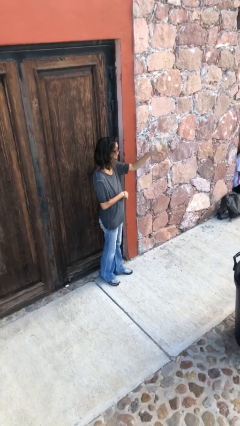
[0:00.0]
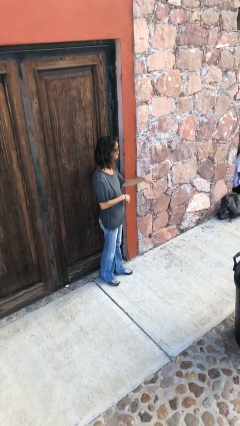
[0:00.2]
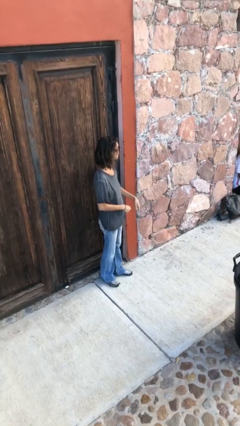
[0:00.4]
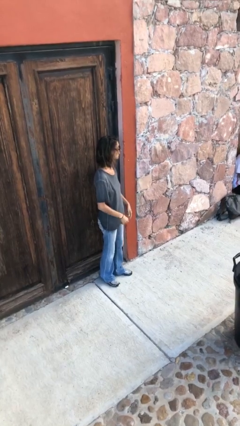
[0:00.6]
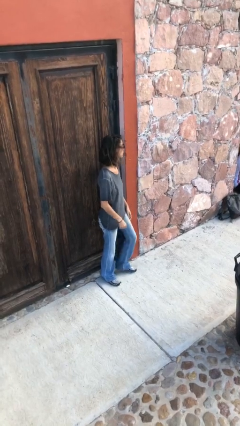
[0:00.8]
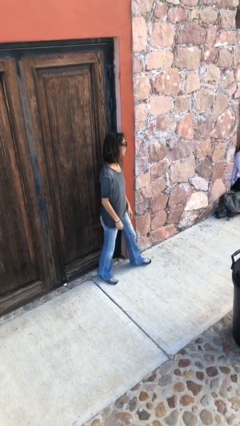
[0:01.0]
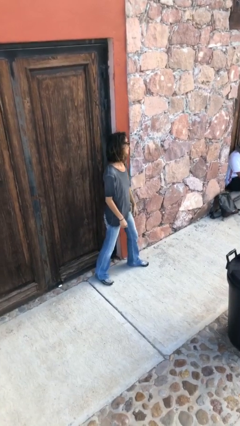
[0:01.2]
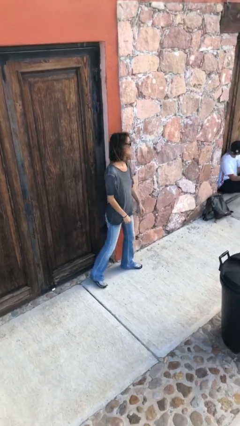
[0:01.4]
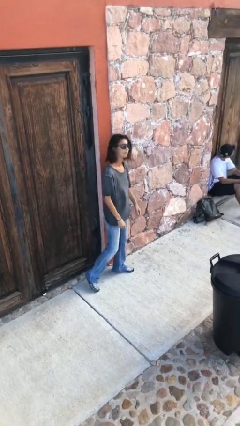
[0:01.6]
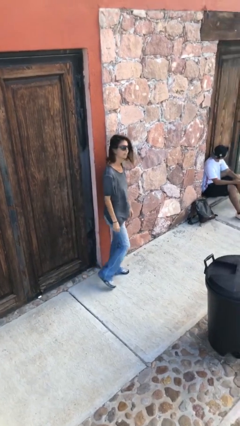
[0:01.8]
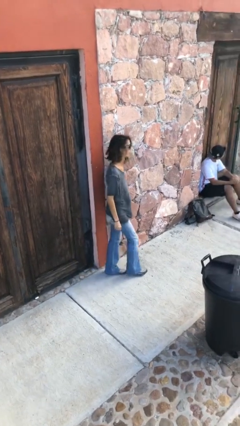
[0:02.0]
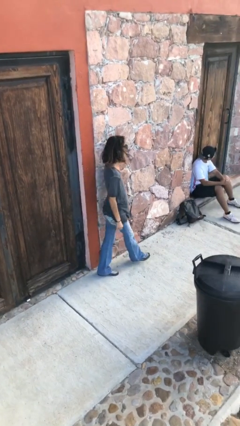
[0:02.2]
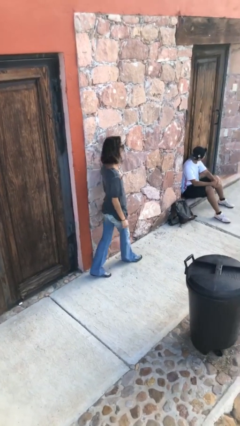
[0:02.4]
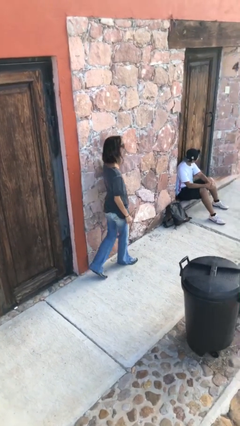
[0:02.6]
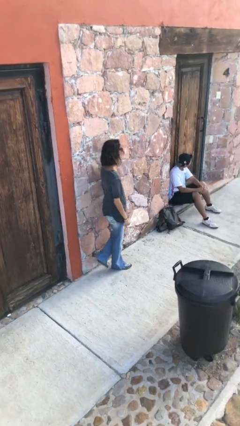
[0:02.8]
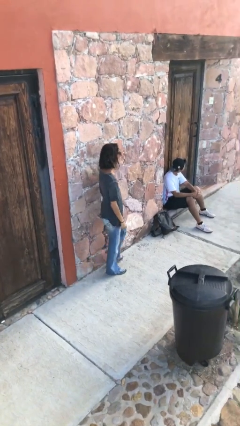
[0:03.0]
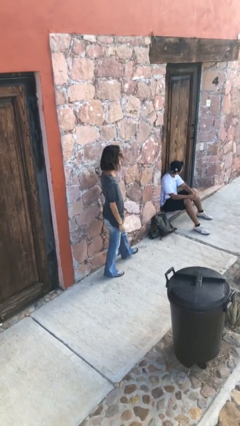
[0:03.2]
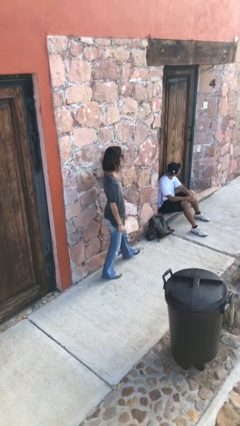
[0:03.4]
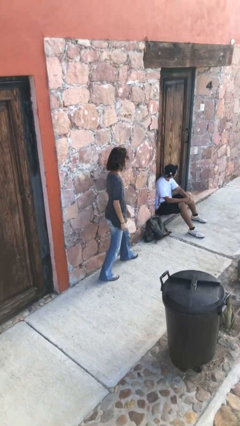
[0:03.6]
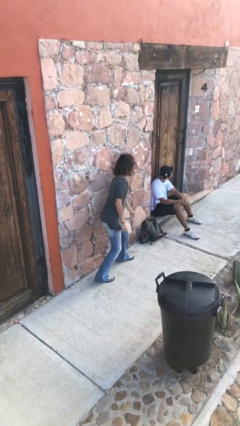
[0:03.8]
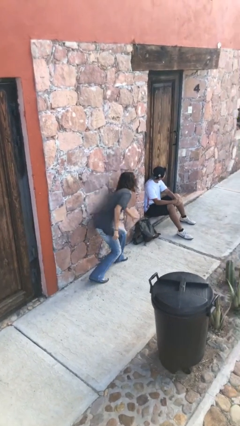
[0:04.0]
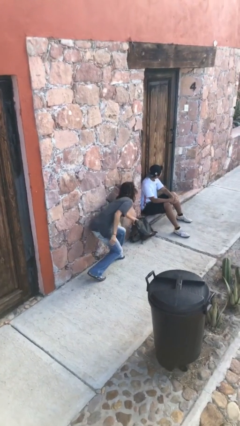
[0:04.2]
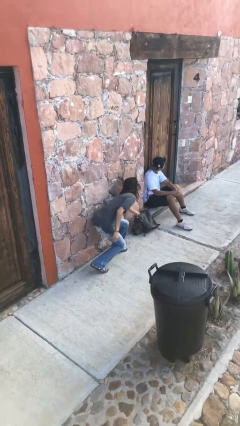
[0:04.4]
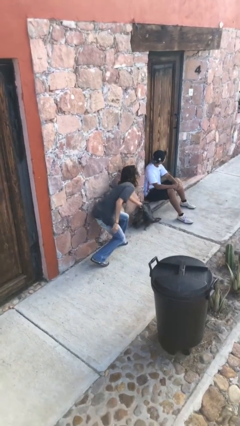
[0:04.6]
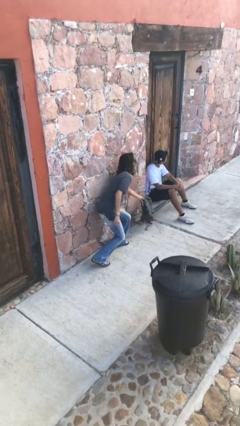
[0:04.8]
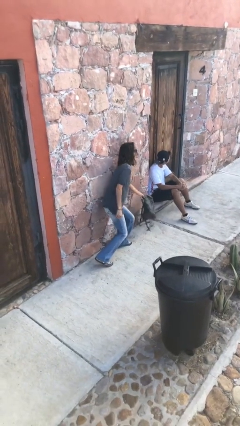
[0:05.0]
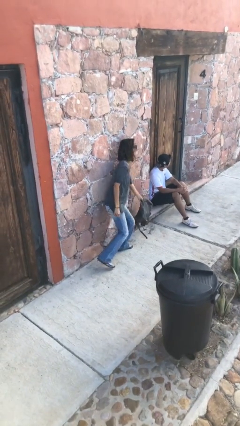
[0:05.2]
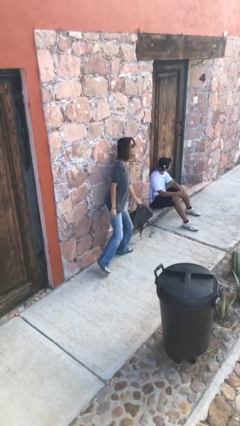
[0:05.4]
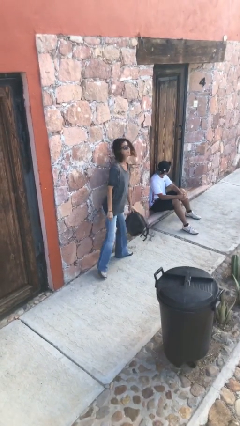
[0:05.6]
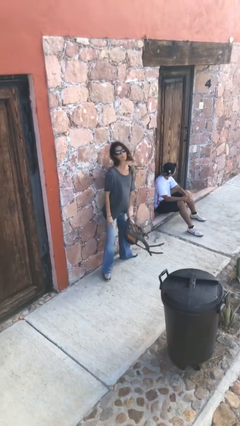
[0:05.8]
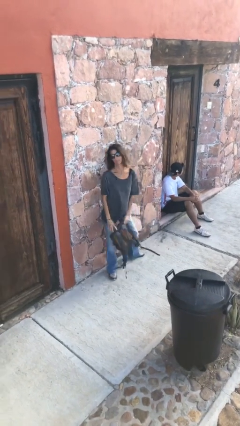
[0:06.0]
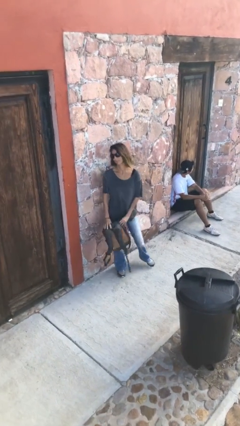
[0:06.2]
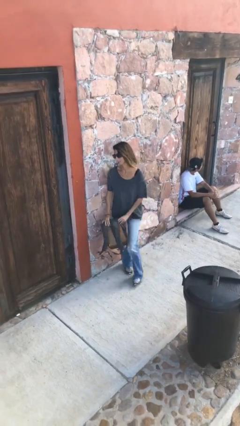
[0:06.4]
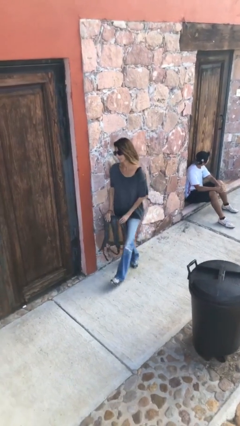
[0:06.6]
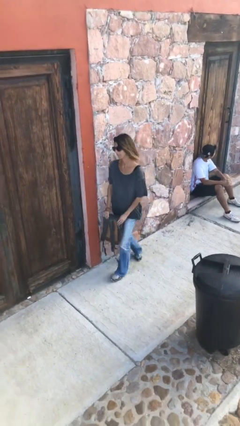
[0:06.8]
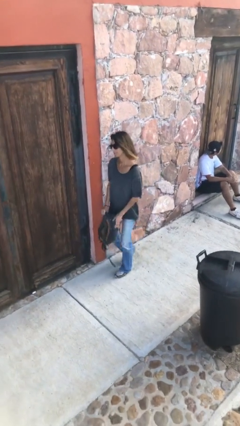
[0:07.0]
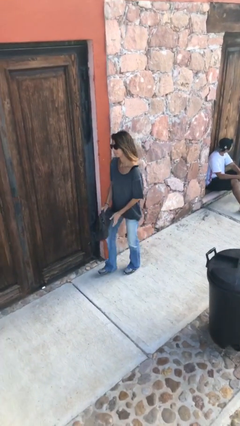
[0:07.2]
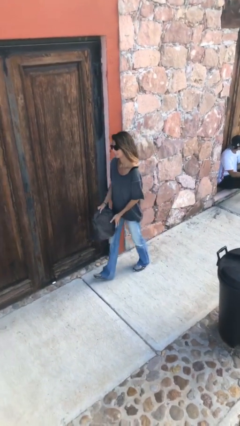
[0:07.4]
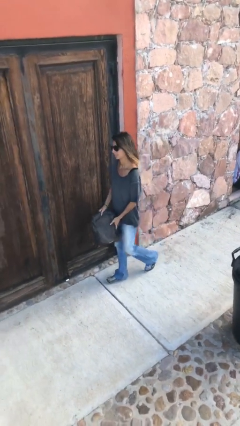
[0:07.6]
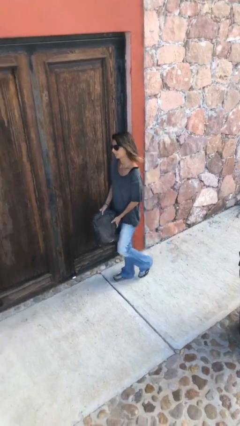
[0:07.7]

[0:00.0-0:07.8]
person steals object from person

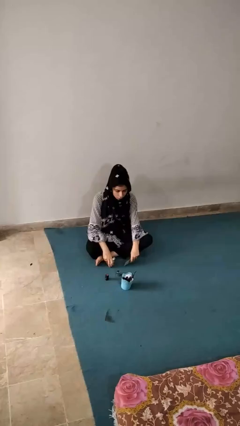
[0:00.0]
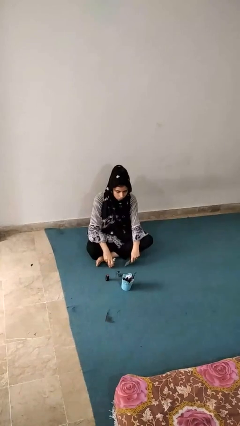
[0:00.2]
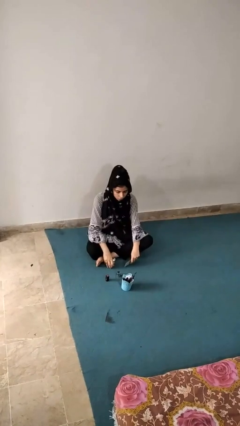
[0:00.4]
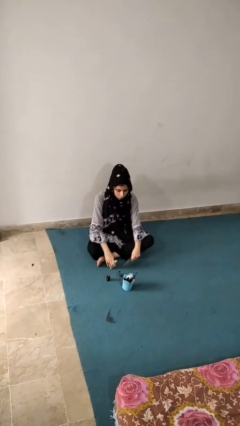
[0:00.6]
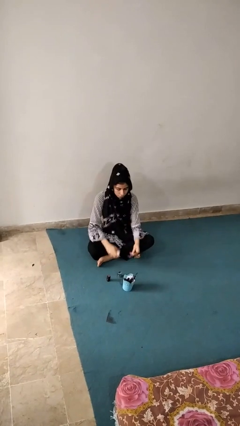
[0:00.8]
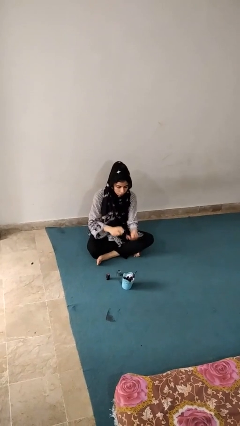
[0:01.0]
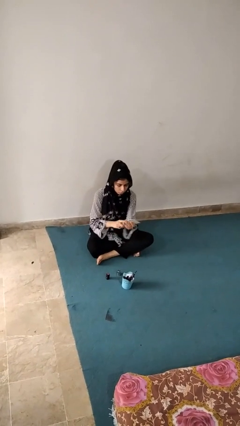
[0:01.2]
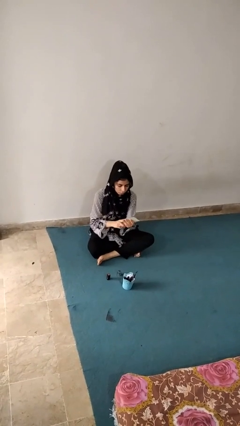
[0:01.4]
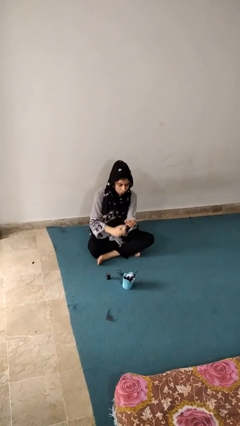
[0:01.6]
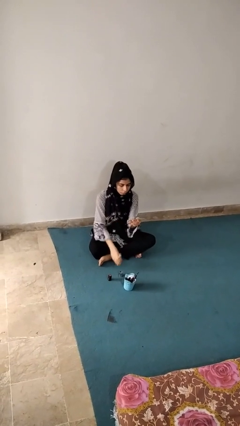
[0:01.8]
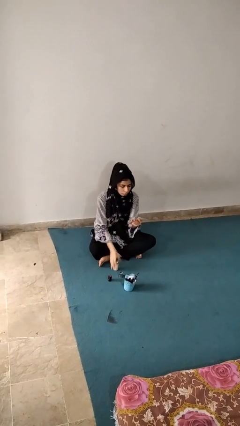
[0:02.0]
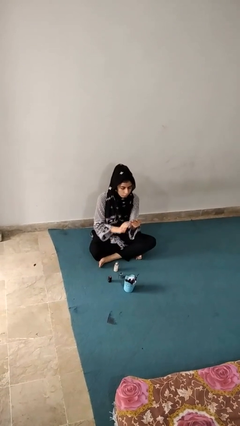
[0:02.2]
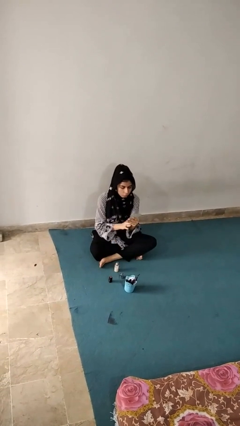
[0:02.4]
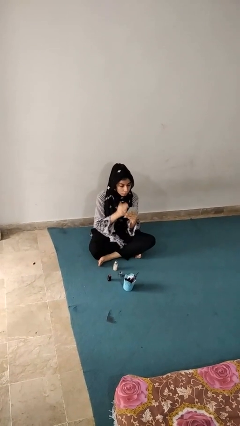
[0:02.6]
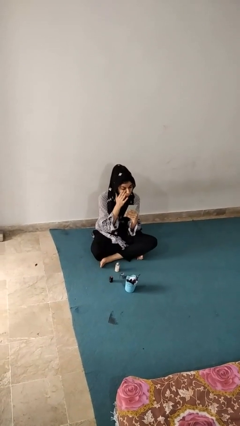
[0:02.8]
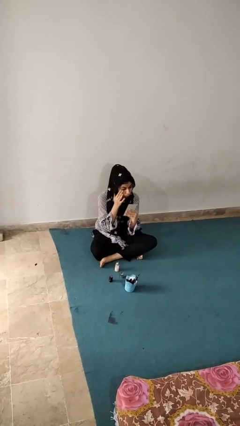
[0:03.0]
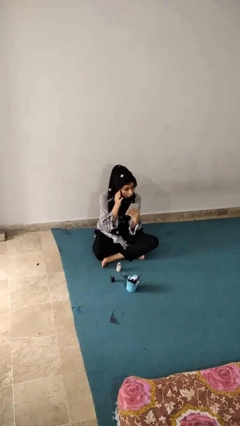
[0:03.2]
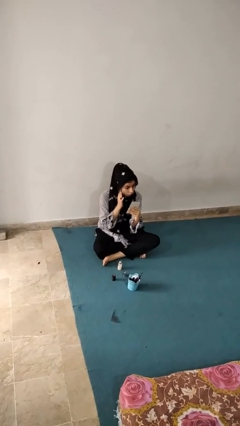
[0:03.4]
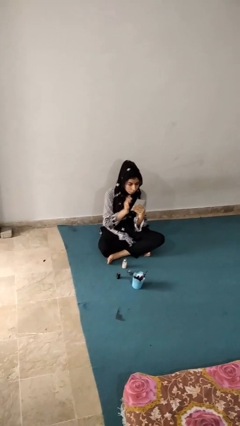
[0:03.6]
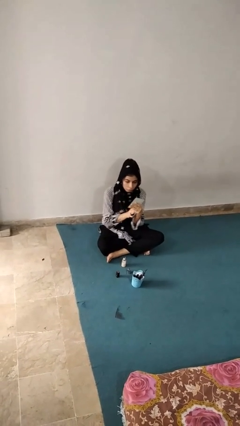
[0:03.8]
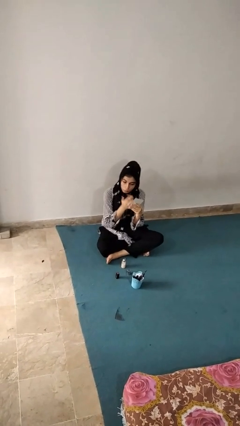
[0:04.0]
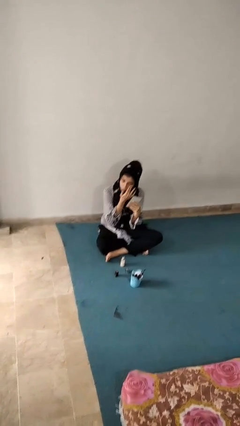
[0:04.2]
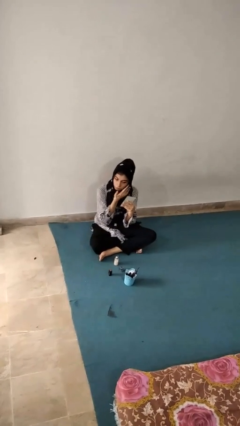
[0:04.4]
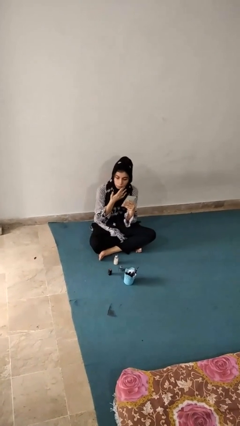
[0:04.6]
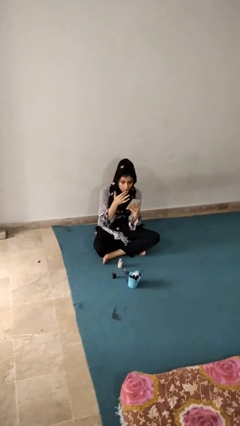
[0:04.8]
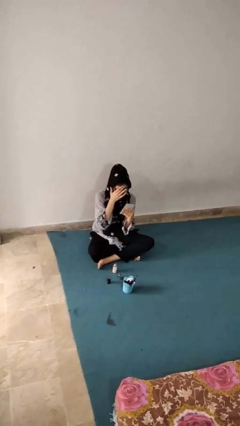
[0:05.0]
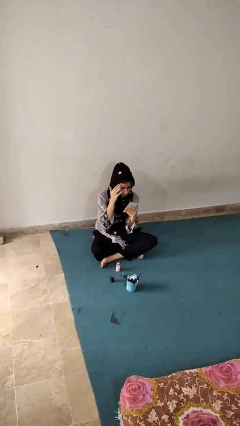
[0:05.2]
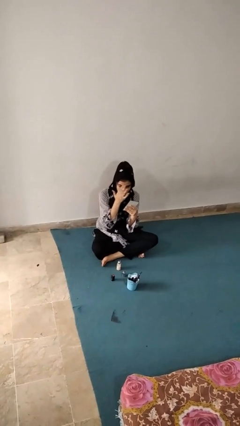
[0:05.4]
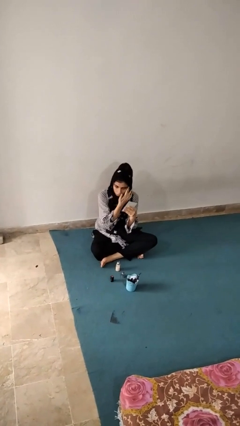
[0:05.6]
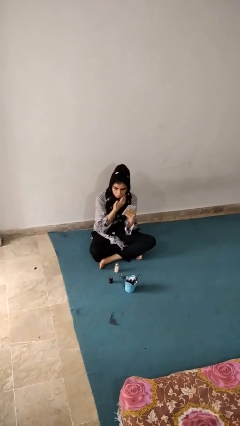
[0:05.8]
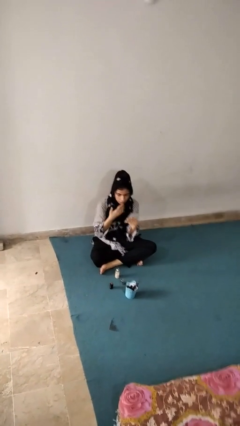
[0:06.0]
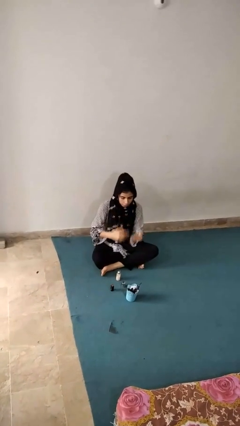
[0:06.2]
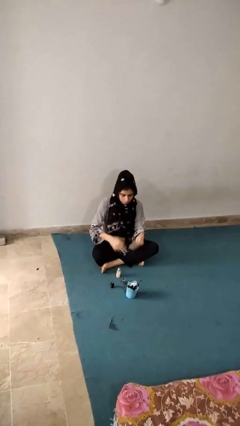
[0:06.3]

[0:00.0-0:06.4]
person applies foundation makeup

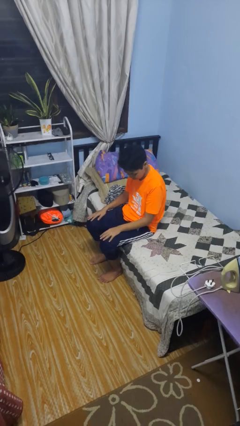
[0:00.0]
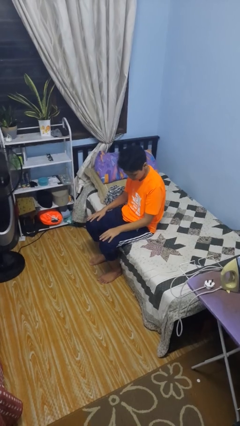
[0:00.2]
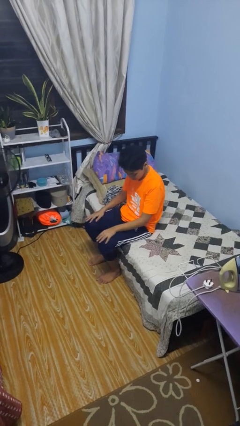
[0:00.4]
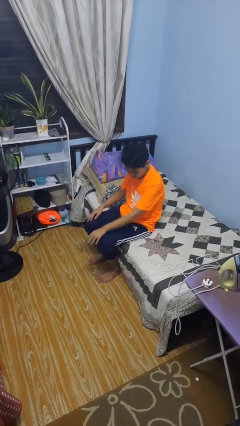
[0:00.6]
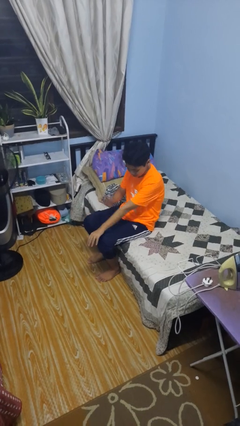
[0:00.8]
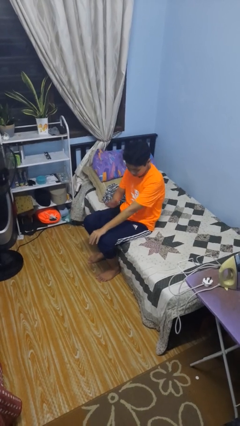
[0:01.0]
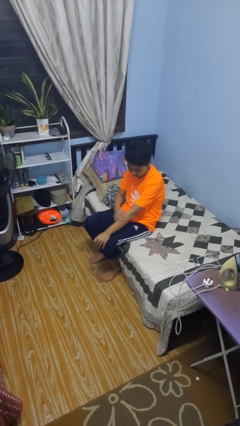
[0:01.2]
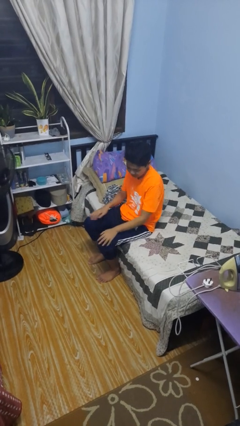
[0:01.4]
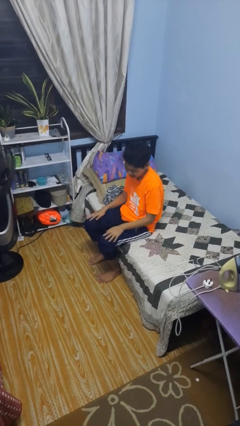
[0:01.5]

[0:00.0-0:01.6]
person swats bug

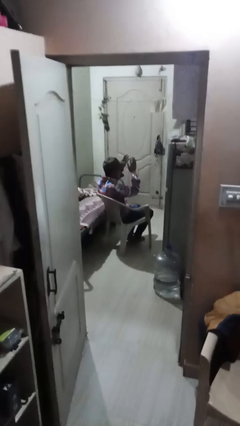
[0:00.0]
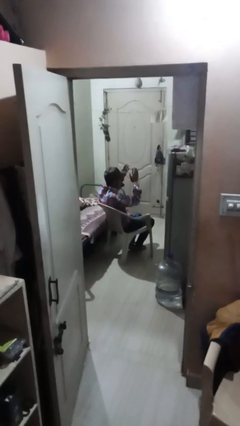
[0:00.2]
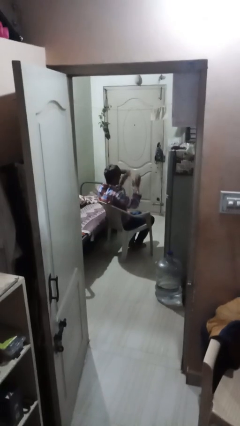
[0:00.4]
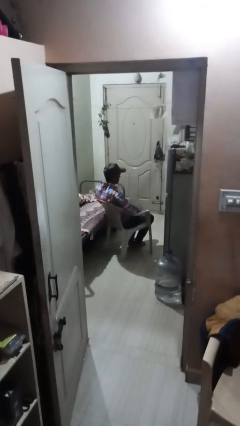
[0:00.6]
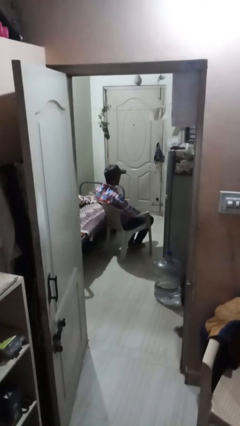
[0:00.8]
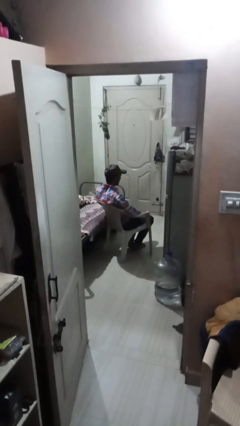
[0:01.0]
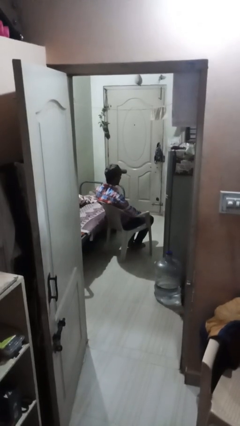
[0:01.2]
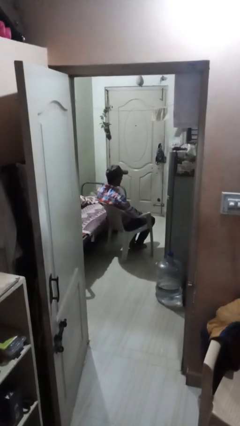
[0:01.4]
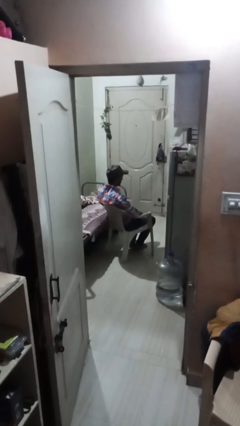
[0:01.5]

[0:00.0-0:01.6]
person claps hands

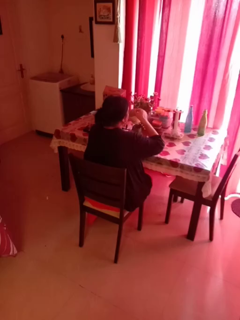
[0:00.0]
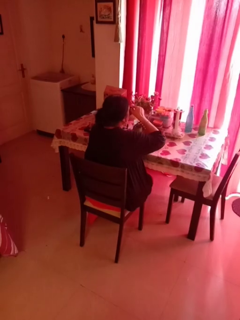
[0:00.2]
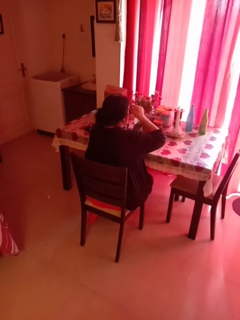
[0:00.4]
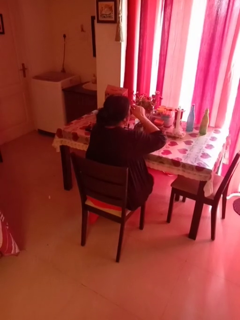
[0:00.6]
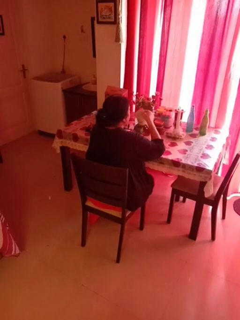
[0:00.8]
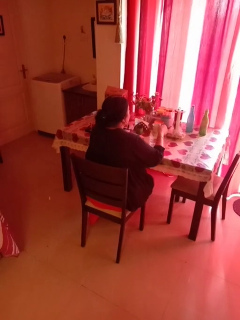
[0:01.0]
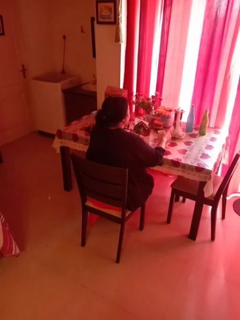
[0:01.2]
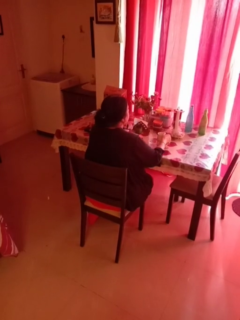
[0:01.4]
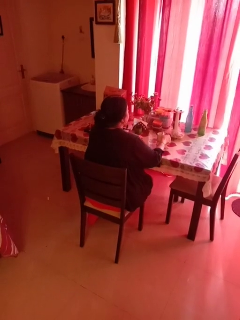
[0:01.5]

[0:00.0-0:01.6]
person drinks from mug
